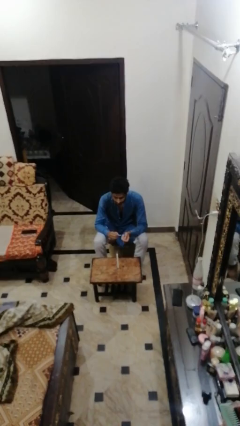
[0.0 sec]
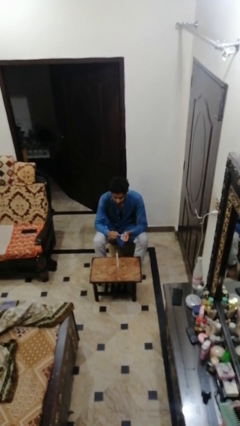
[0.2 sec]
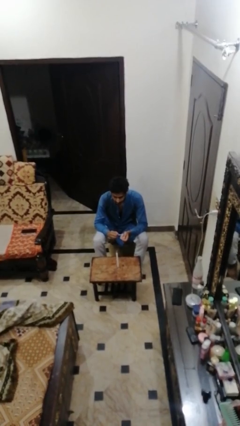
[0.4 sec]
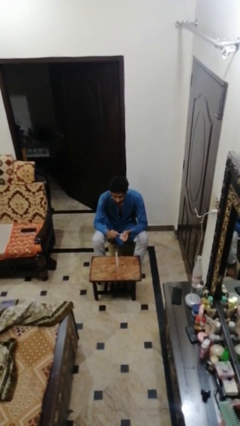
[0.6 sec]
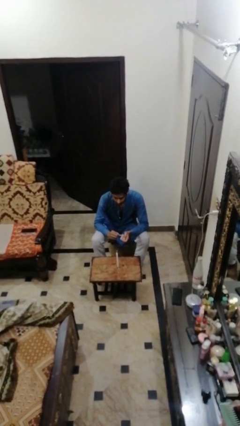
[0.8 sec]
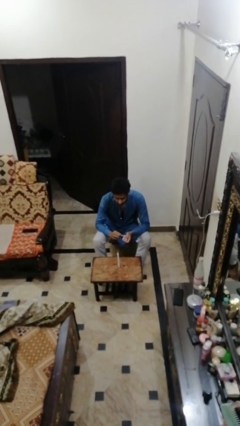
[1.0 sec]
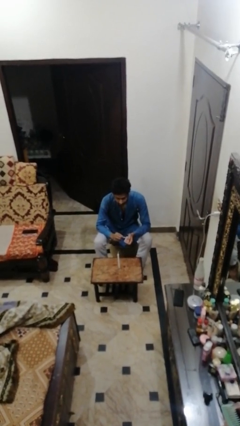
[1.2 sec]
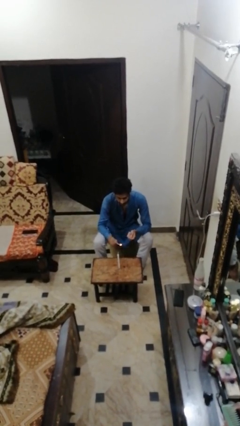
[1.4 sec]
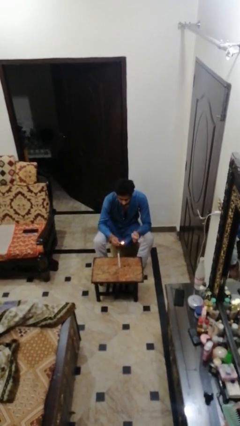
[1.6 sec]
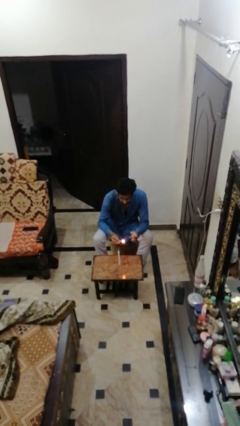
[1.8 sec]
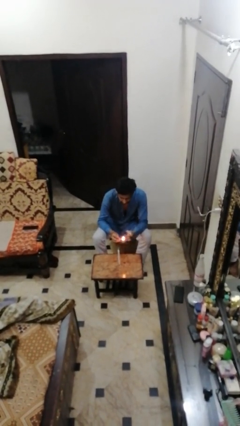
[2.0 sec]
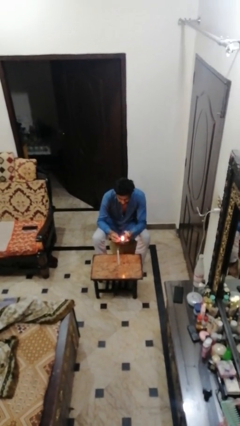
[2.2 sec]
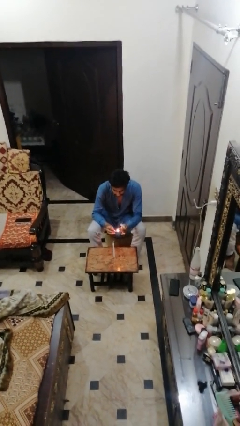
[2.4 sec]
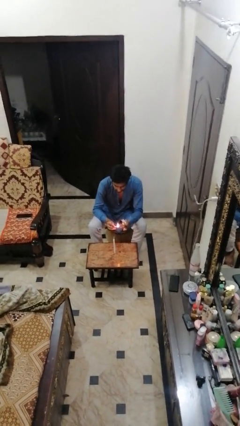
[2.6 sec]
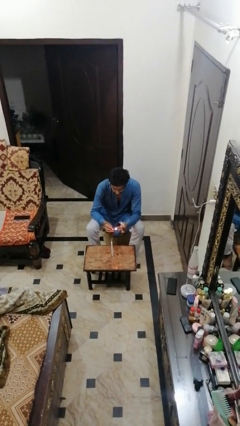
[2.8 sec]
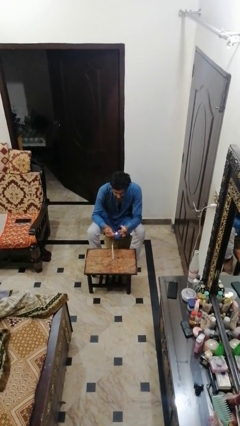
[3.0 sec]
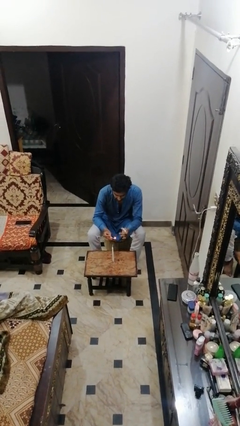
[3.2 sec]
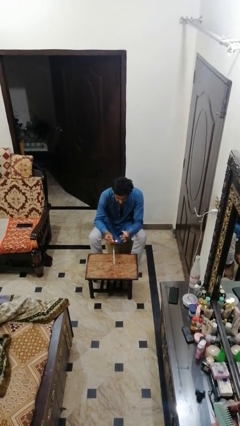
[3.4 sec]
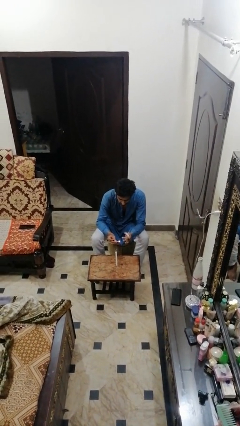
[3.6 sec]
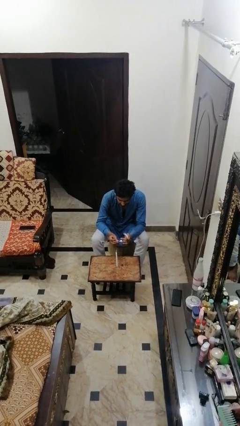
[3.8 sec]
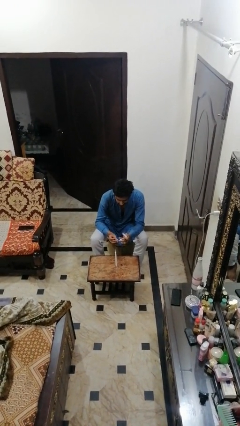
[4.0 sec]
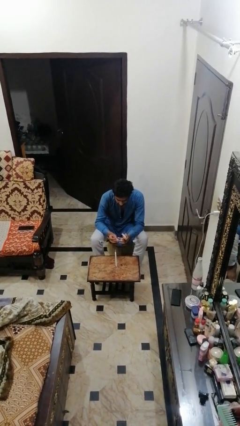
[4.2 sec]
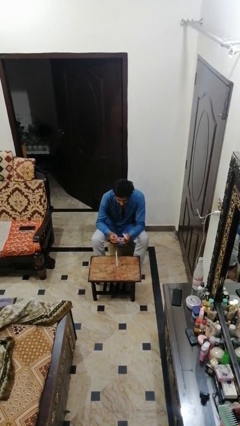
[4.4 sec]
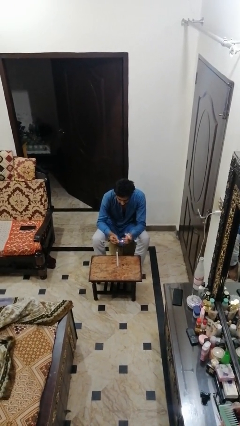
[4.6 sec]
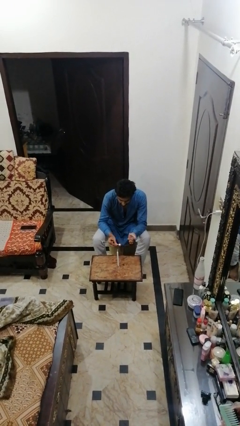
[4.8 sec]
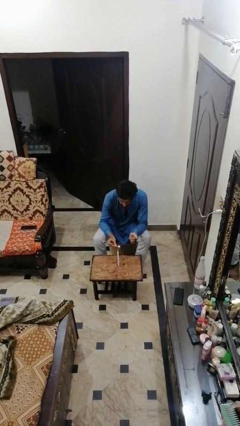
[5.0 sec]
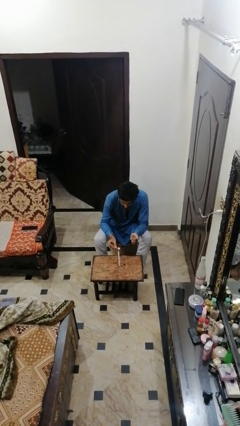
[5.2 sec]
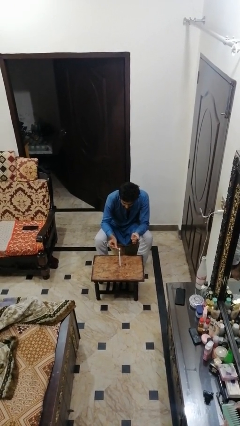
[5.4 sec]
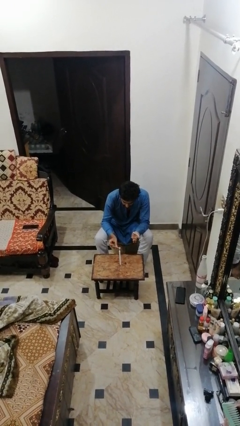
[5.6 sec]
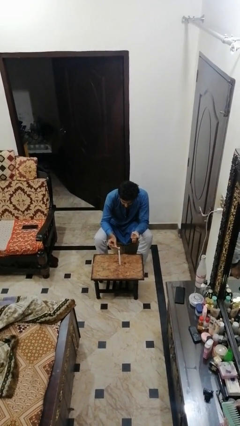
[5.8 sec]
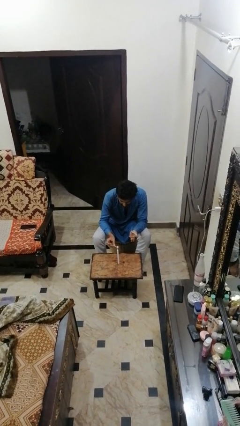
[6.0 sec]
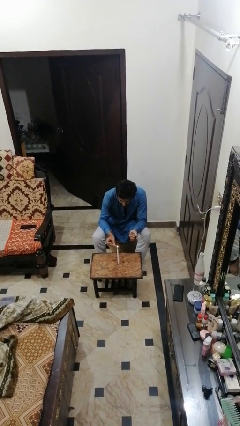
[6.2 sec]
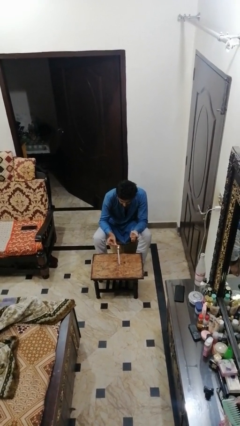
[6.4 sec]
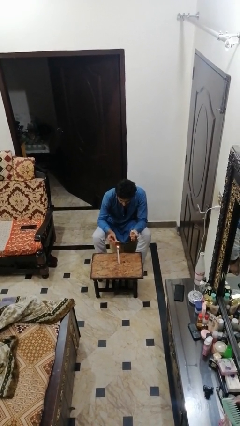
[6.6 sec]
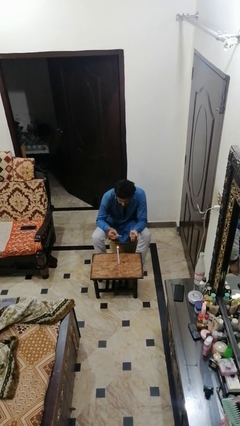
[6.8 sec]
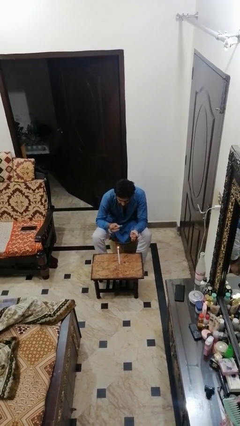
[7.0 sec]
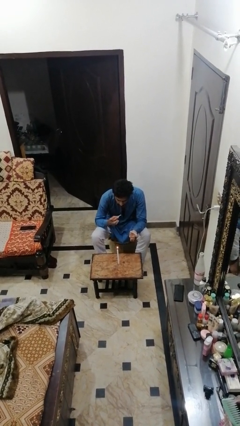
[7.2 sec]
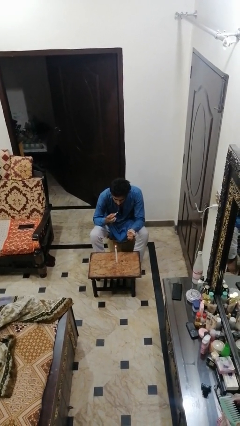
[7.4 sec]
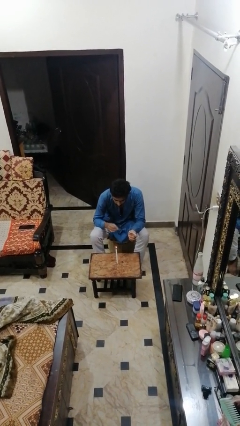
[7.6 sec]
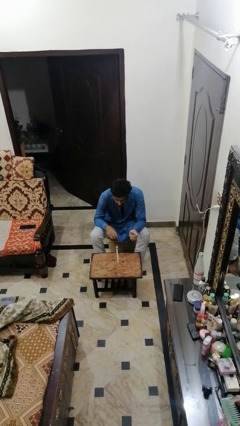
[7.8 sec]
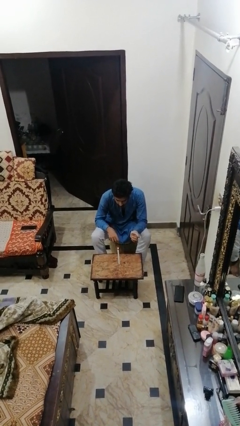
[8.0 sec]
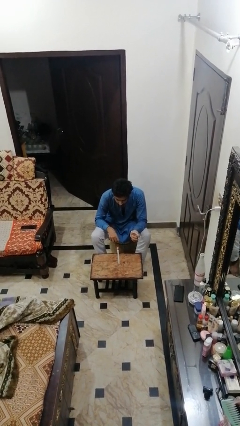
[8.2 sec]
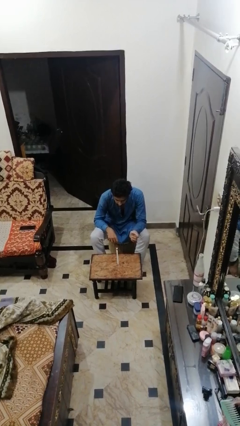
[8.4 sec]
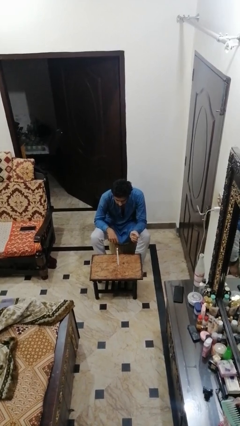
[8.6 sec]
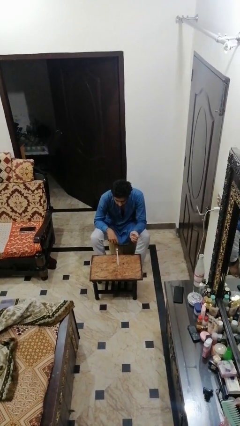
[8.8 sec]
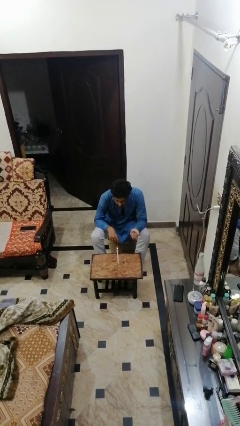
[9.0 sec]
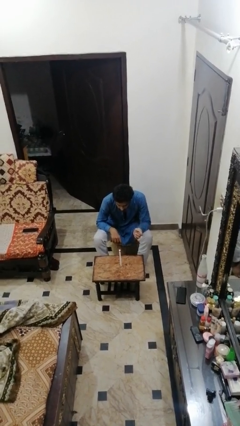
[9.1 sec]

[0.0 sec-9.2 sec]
person lights candle

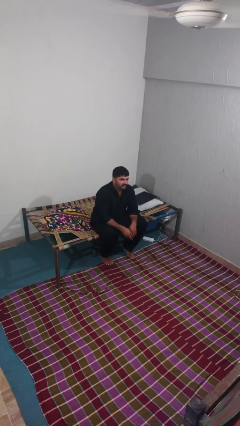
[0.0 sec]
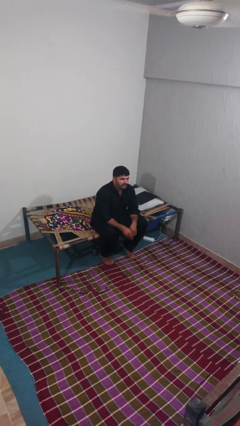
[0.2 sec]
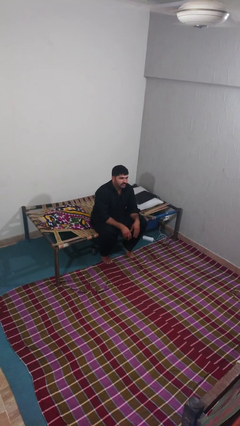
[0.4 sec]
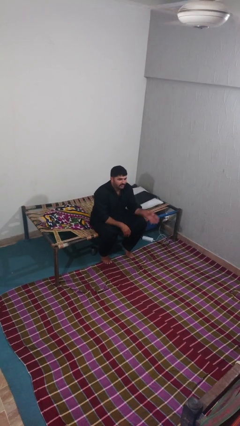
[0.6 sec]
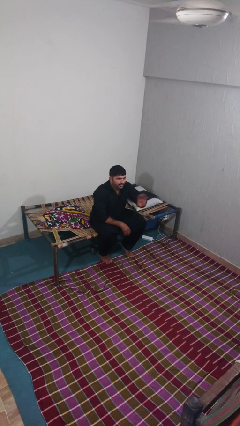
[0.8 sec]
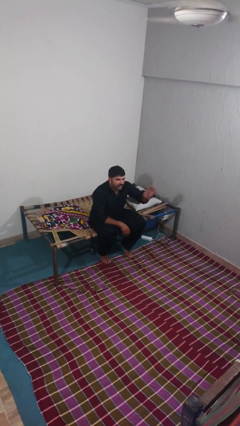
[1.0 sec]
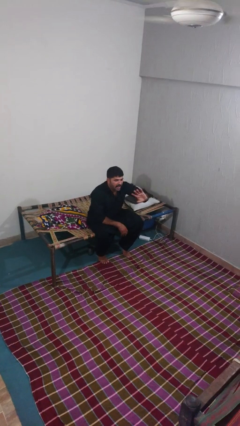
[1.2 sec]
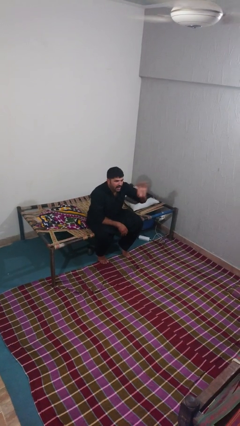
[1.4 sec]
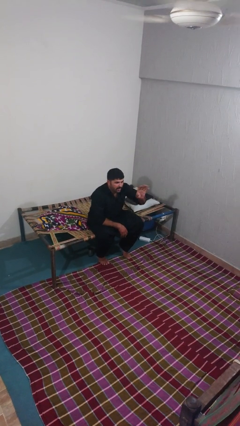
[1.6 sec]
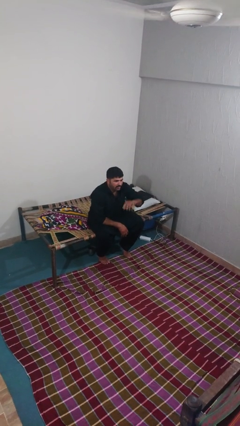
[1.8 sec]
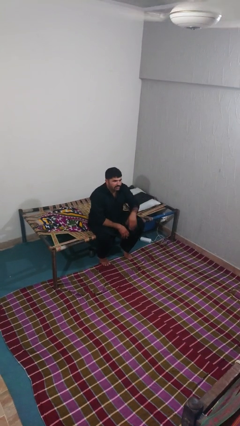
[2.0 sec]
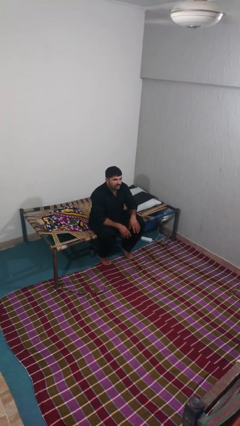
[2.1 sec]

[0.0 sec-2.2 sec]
person waves at person

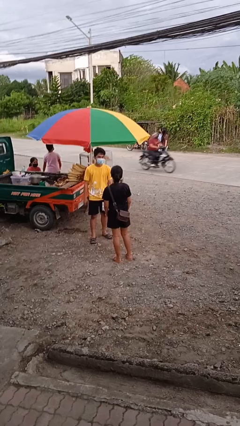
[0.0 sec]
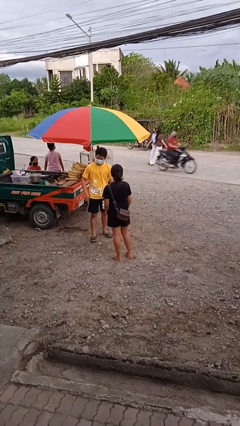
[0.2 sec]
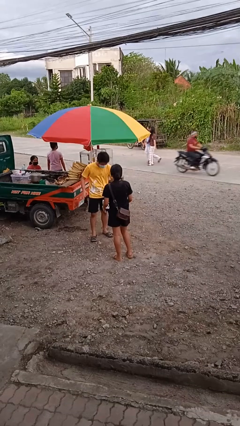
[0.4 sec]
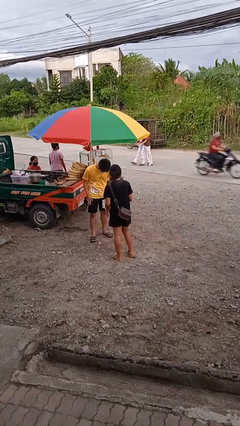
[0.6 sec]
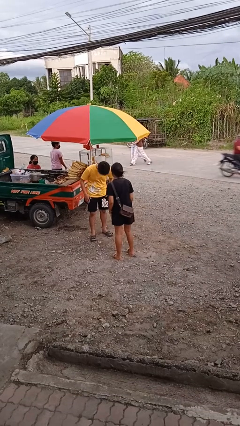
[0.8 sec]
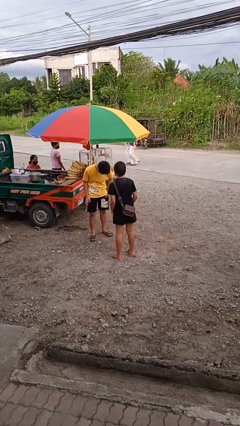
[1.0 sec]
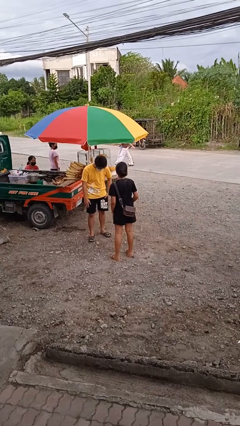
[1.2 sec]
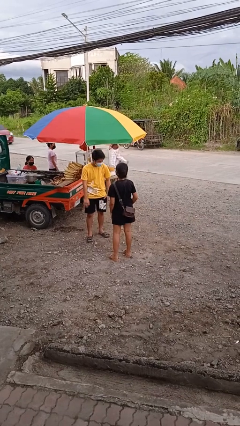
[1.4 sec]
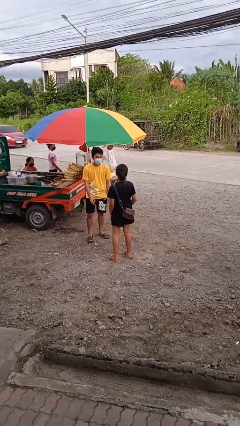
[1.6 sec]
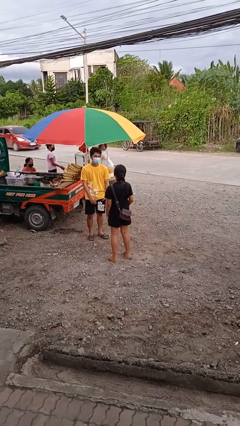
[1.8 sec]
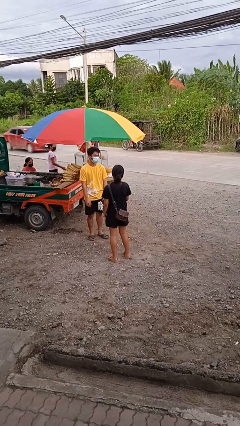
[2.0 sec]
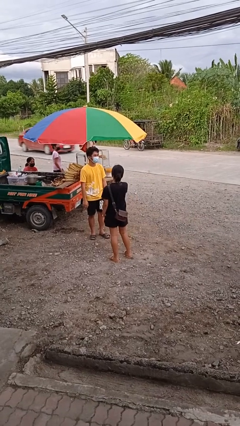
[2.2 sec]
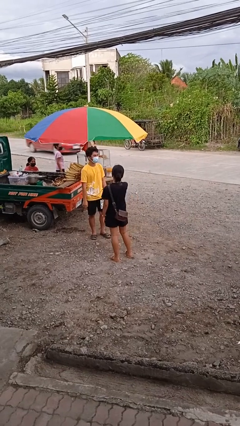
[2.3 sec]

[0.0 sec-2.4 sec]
person laughs with person

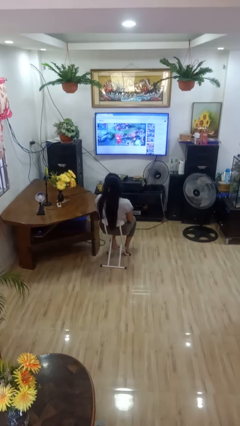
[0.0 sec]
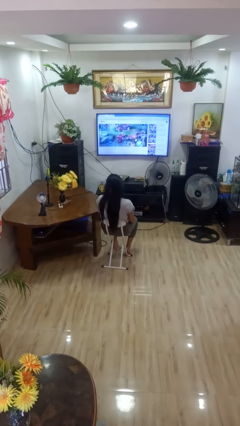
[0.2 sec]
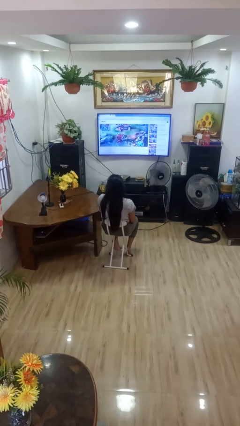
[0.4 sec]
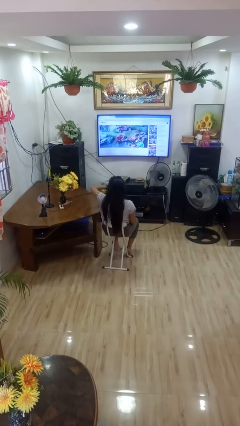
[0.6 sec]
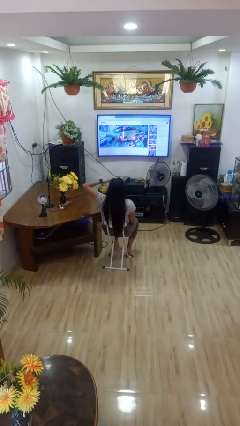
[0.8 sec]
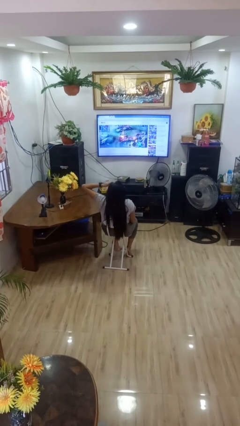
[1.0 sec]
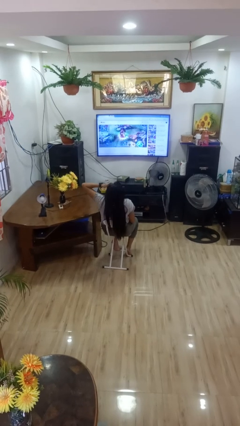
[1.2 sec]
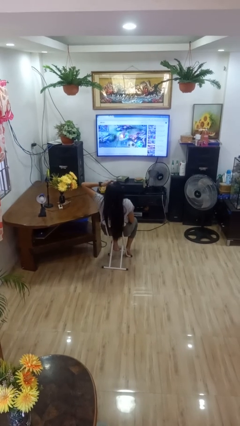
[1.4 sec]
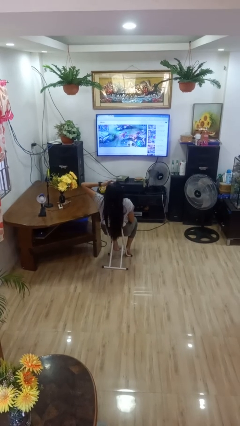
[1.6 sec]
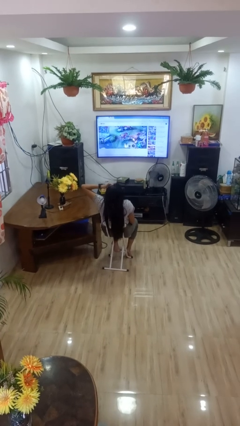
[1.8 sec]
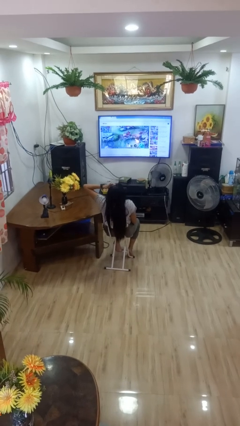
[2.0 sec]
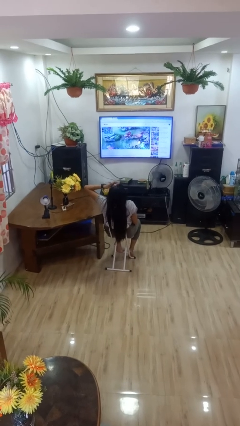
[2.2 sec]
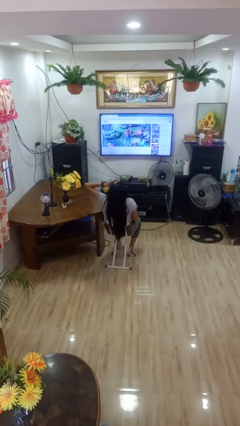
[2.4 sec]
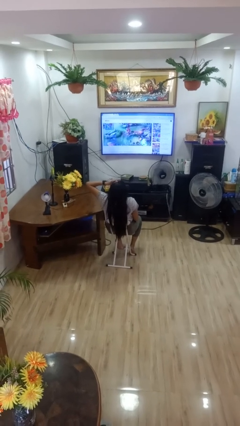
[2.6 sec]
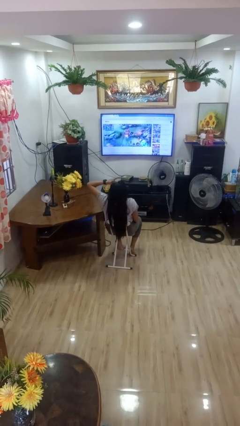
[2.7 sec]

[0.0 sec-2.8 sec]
person yawns

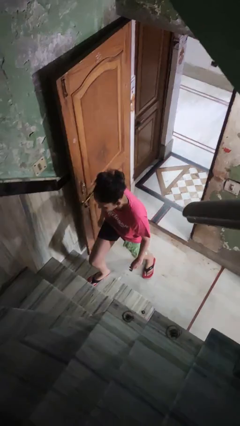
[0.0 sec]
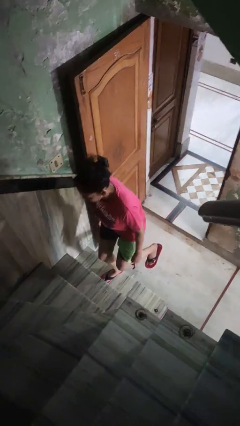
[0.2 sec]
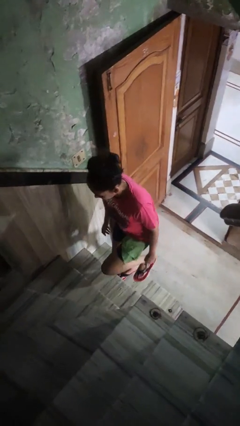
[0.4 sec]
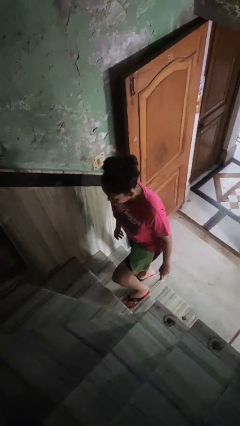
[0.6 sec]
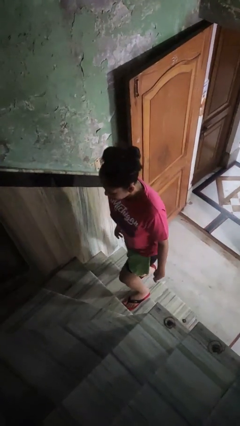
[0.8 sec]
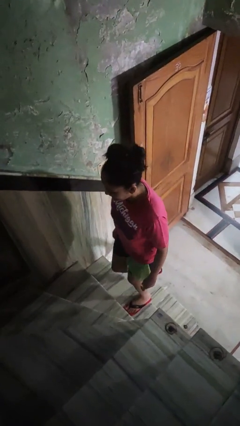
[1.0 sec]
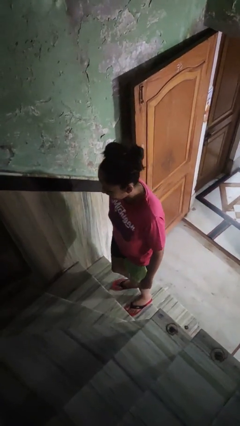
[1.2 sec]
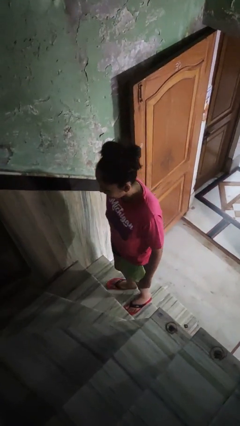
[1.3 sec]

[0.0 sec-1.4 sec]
person climbs up stairs
